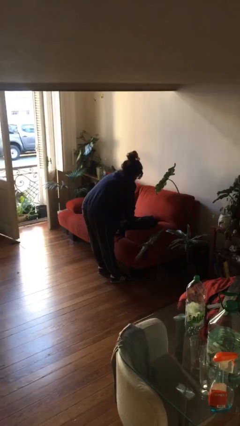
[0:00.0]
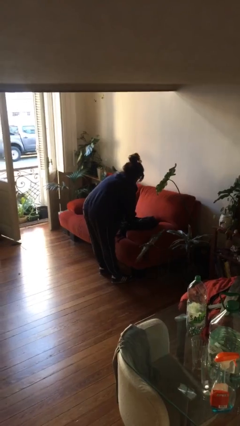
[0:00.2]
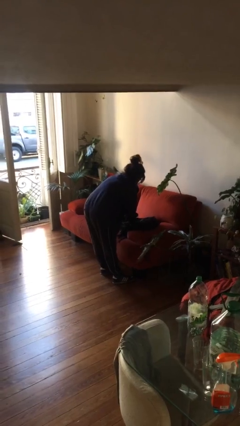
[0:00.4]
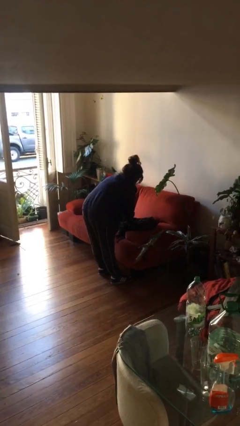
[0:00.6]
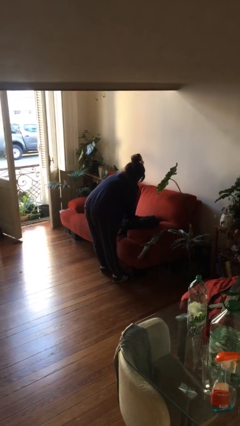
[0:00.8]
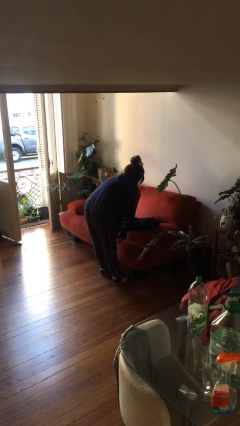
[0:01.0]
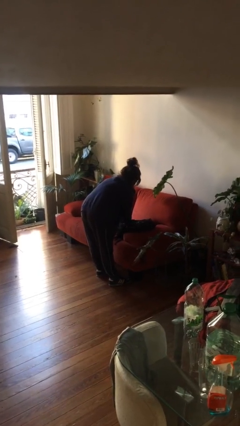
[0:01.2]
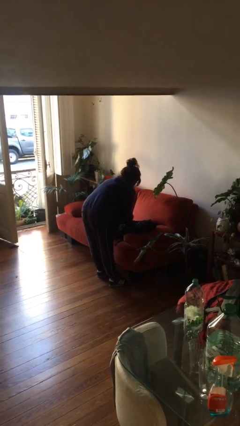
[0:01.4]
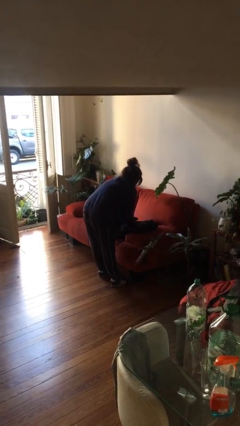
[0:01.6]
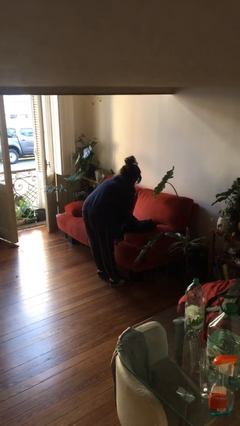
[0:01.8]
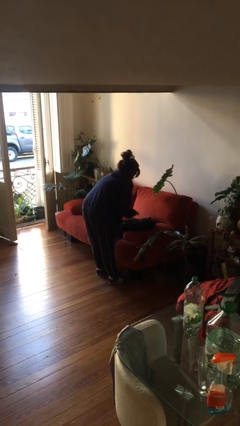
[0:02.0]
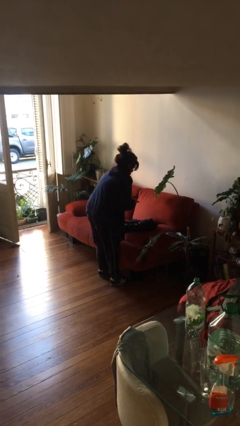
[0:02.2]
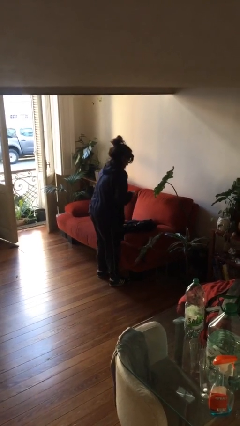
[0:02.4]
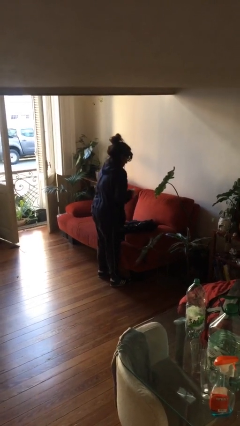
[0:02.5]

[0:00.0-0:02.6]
person searches in backpack

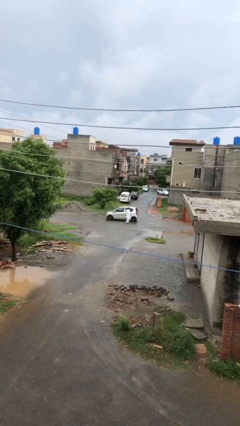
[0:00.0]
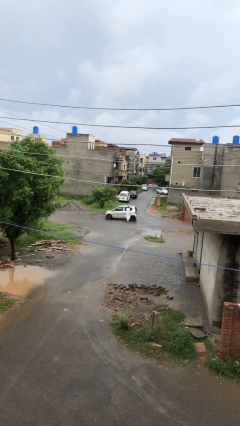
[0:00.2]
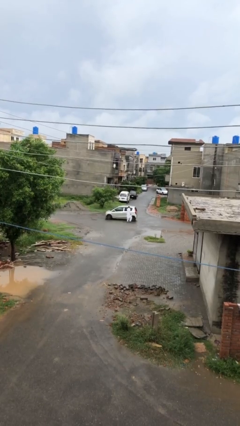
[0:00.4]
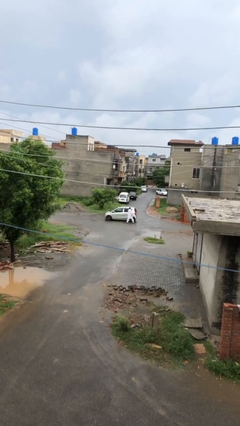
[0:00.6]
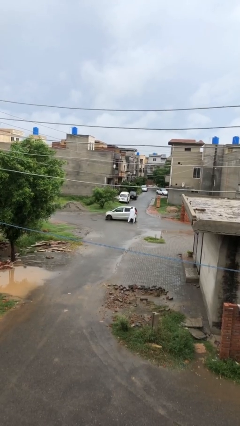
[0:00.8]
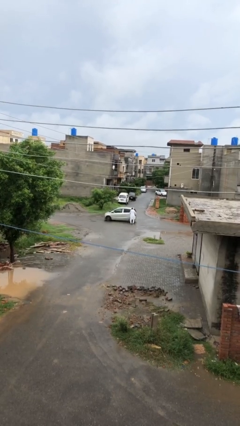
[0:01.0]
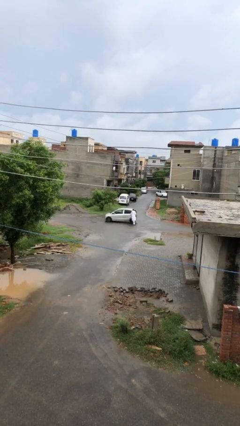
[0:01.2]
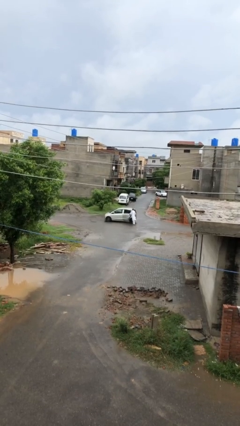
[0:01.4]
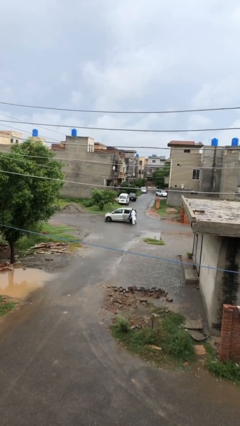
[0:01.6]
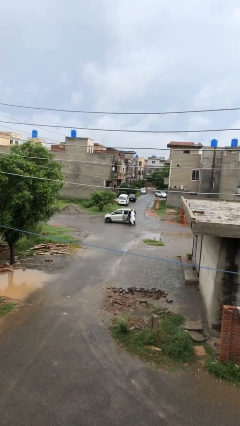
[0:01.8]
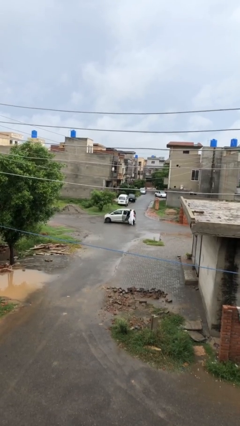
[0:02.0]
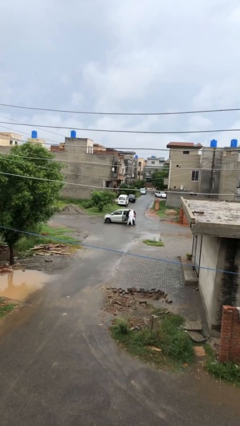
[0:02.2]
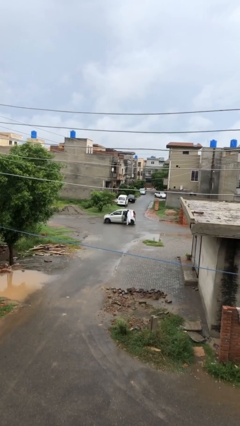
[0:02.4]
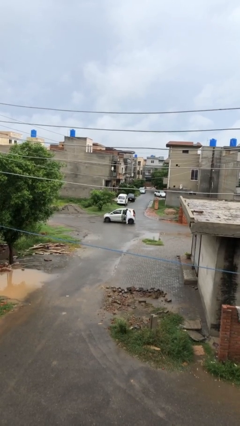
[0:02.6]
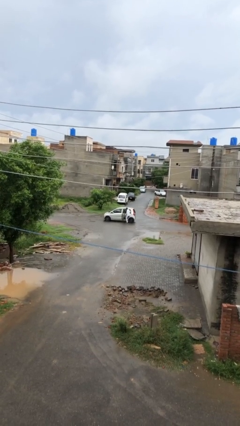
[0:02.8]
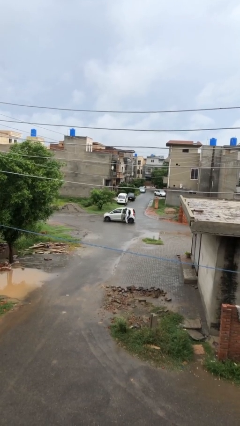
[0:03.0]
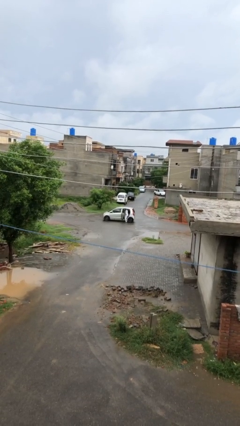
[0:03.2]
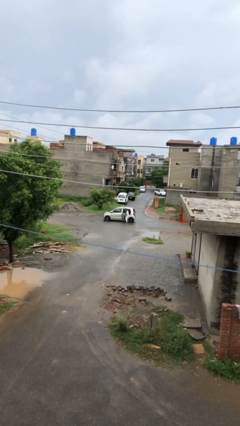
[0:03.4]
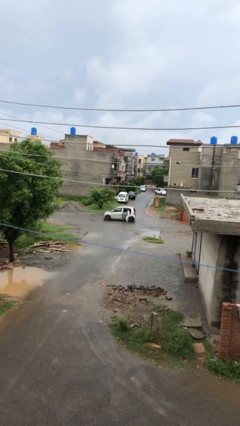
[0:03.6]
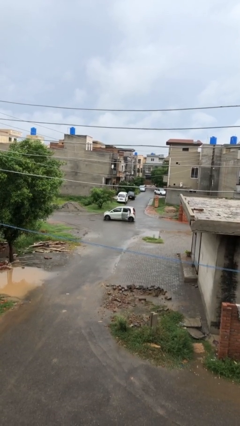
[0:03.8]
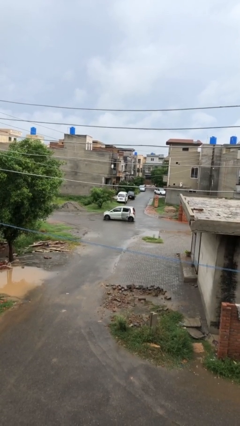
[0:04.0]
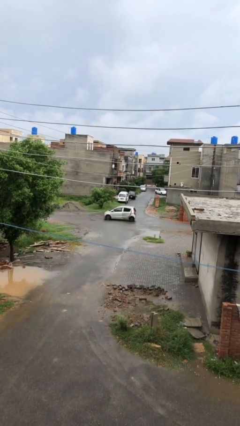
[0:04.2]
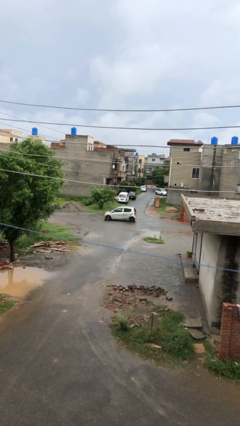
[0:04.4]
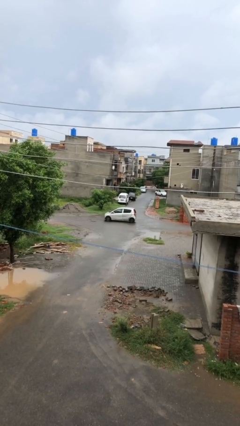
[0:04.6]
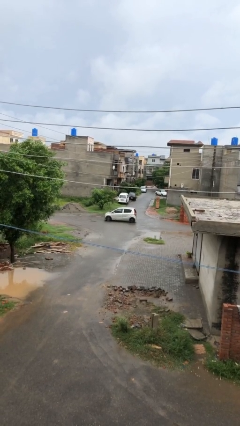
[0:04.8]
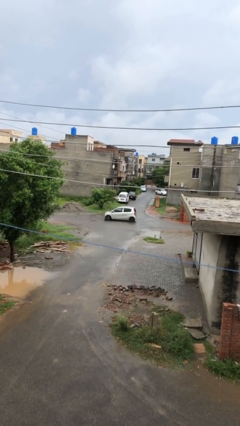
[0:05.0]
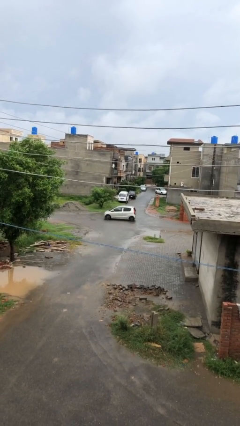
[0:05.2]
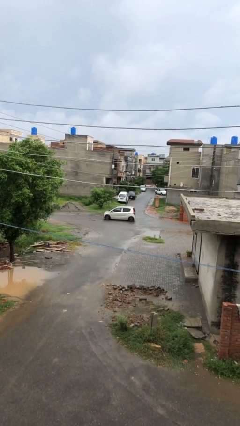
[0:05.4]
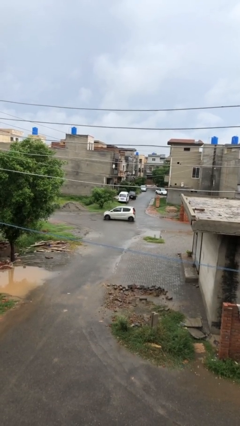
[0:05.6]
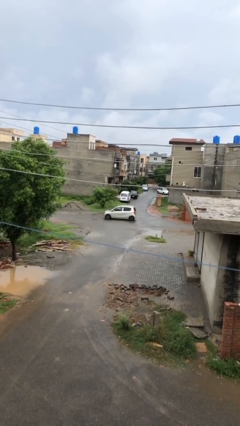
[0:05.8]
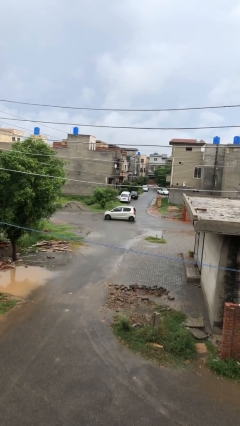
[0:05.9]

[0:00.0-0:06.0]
car picks up person

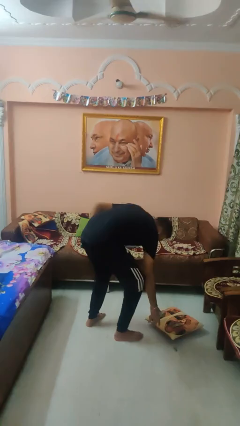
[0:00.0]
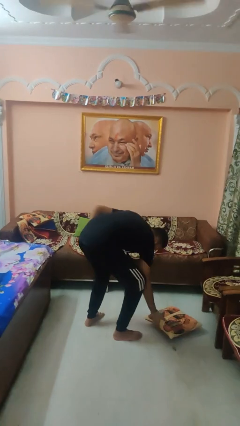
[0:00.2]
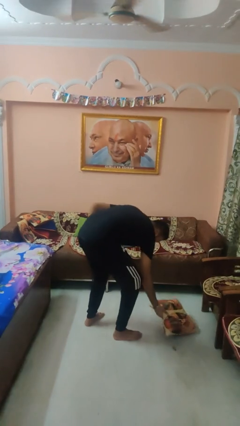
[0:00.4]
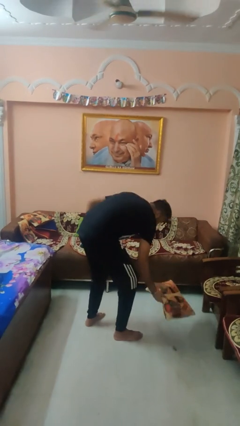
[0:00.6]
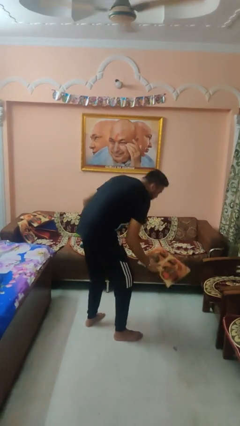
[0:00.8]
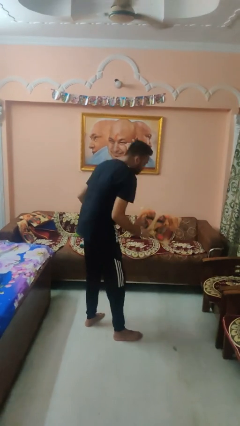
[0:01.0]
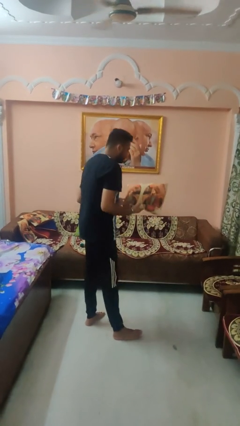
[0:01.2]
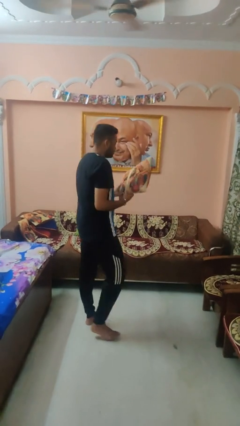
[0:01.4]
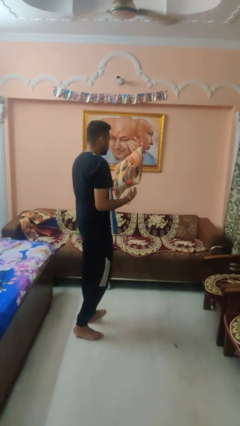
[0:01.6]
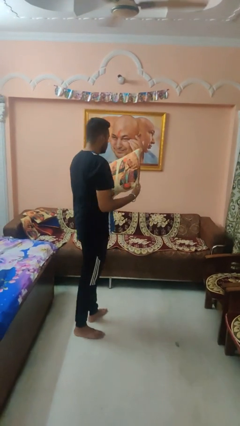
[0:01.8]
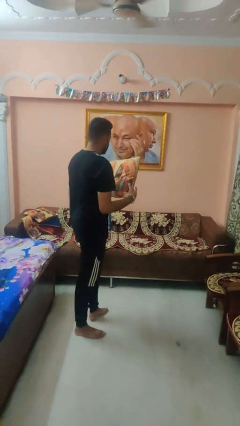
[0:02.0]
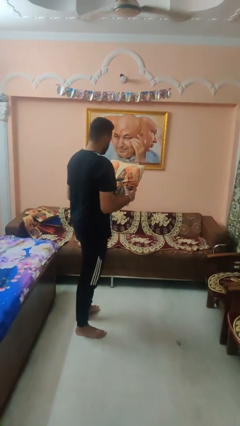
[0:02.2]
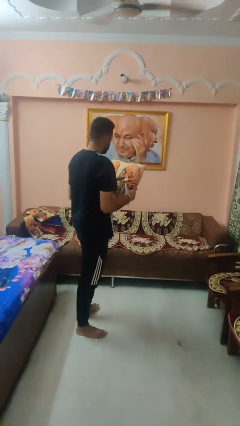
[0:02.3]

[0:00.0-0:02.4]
person picks up object from floor

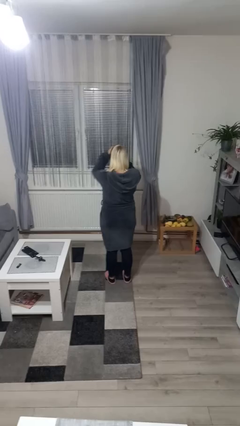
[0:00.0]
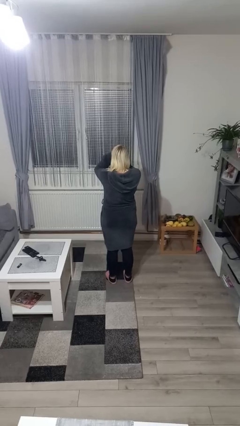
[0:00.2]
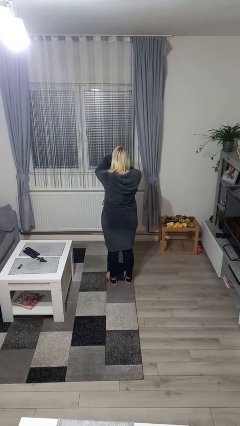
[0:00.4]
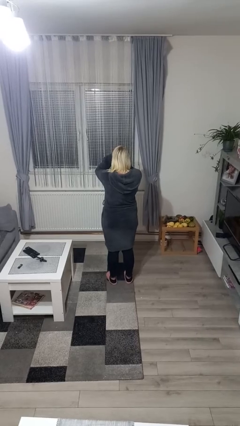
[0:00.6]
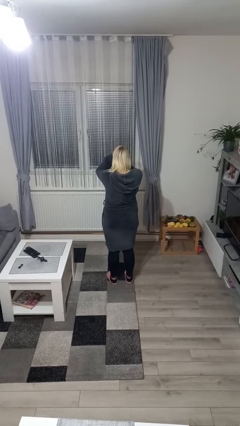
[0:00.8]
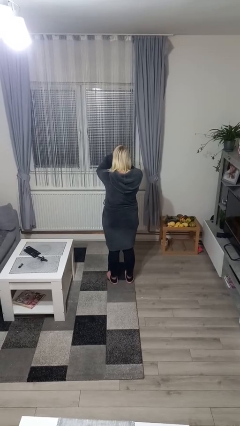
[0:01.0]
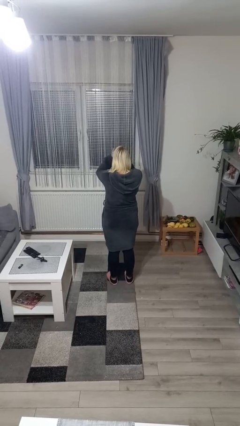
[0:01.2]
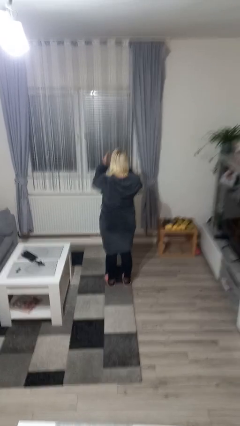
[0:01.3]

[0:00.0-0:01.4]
person covers face with hands

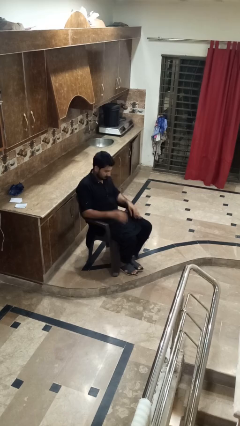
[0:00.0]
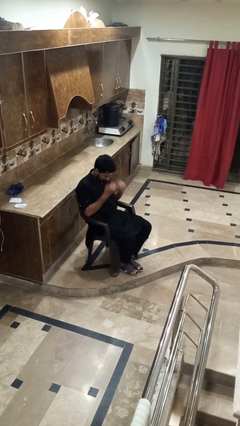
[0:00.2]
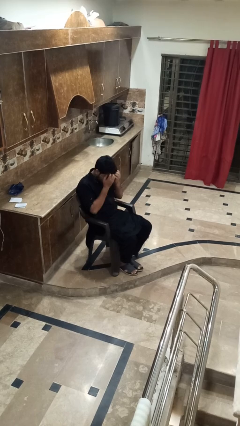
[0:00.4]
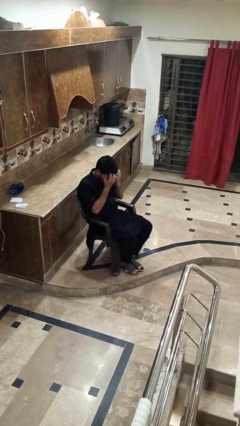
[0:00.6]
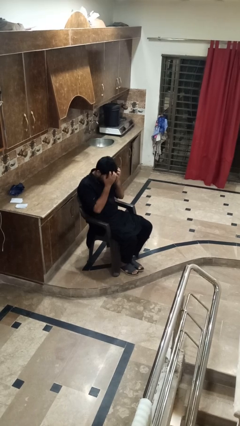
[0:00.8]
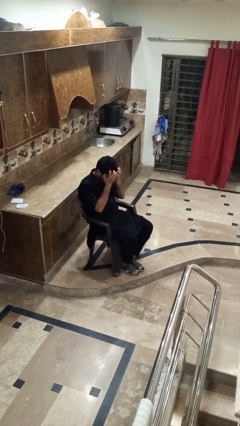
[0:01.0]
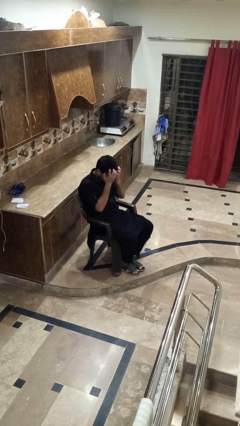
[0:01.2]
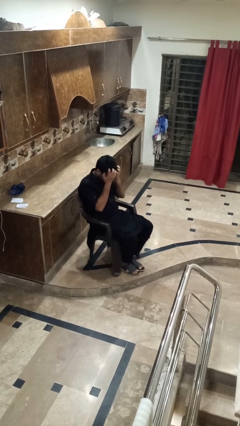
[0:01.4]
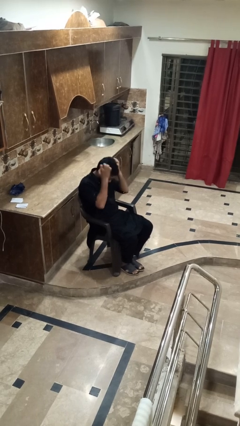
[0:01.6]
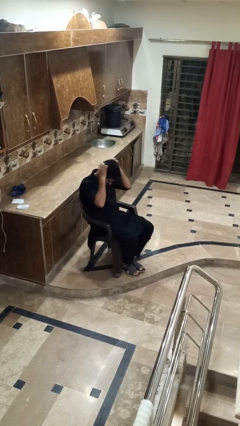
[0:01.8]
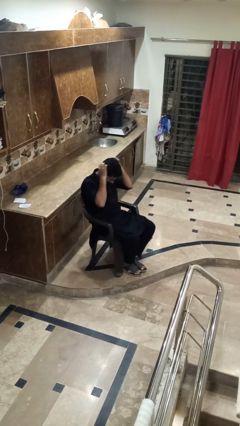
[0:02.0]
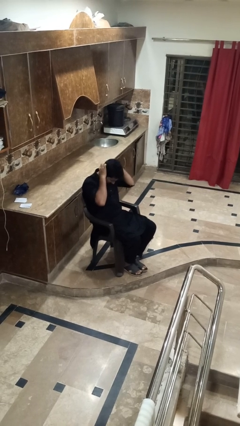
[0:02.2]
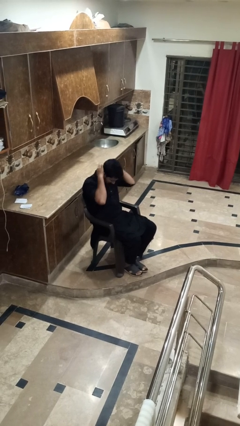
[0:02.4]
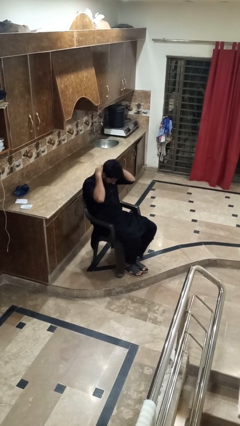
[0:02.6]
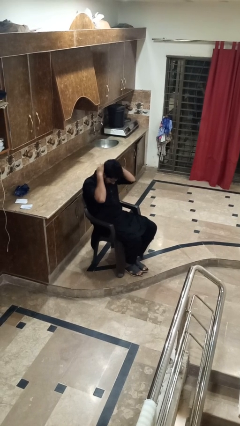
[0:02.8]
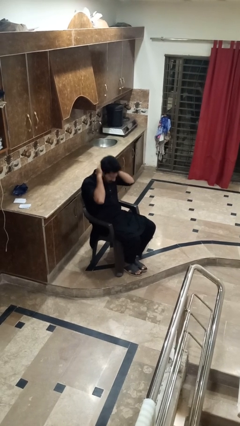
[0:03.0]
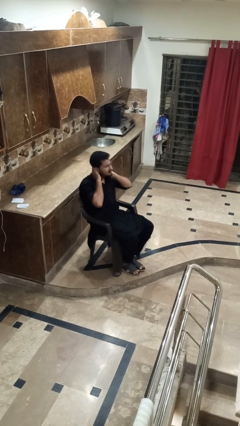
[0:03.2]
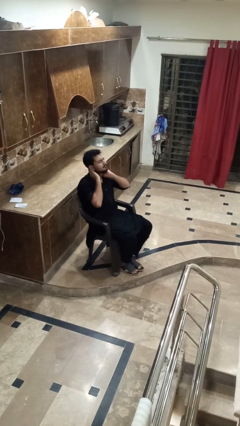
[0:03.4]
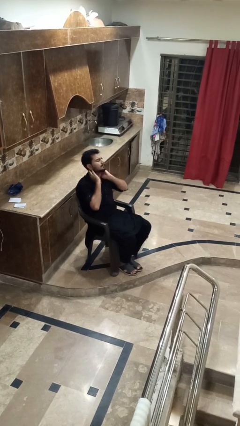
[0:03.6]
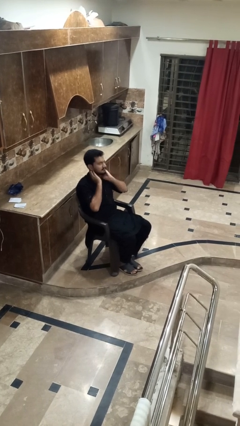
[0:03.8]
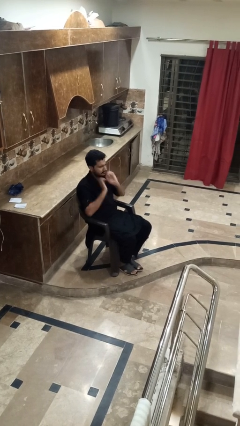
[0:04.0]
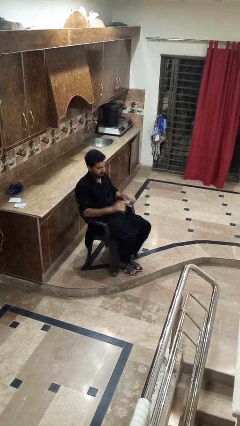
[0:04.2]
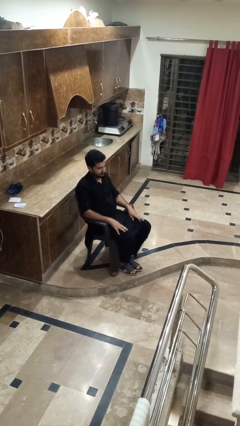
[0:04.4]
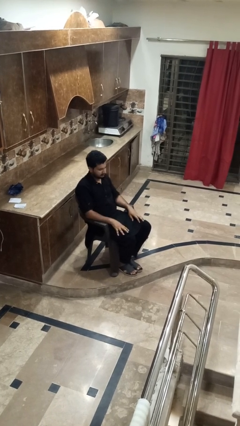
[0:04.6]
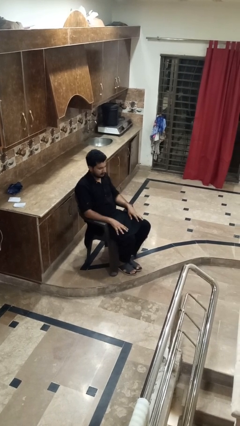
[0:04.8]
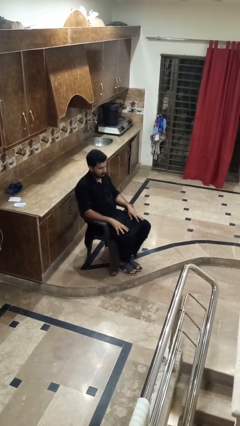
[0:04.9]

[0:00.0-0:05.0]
person scratches face

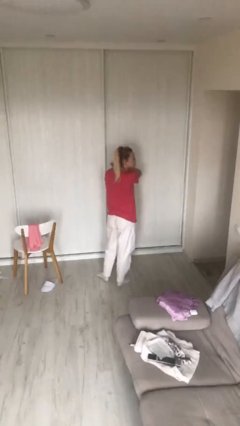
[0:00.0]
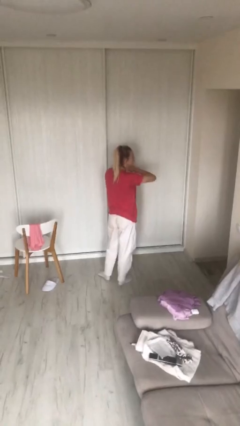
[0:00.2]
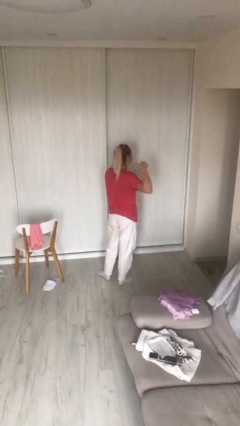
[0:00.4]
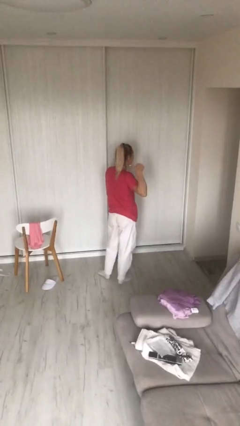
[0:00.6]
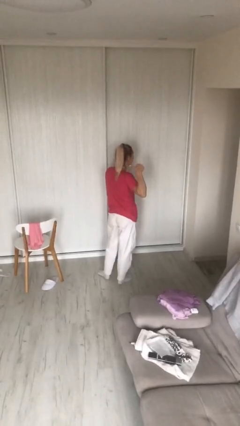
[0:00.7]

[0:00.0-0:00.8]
person gestures cut
